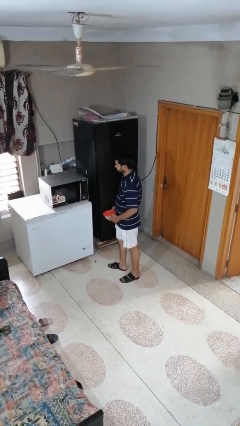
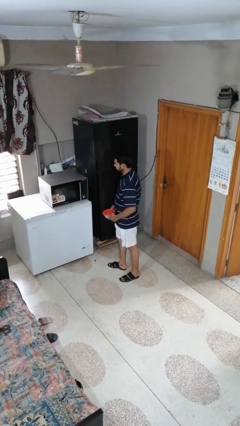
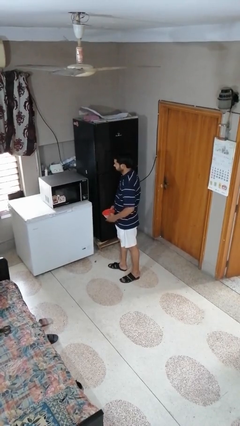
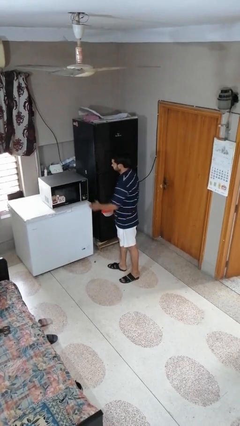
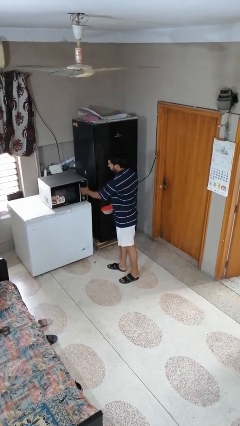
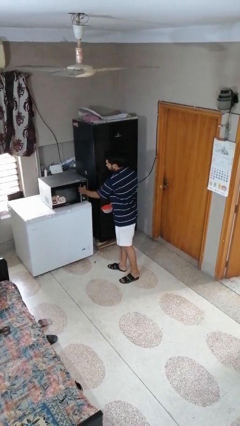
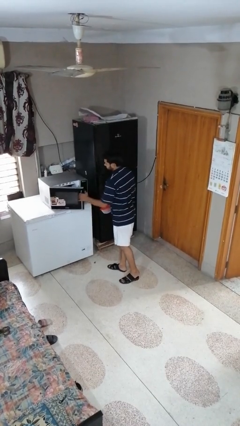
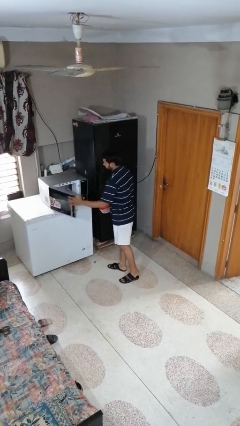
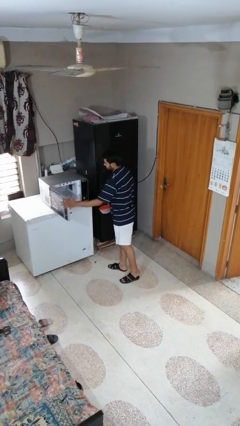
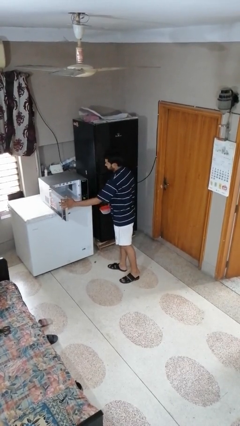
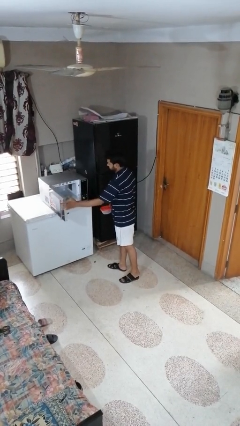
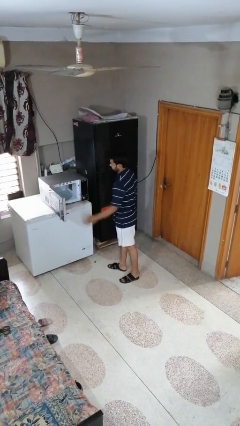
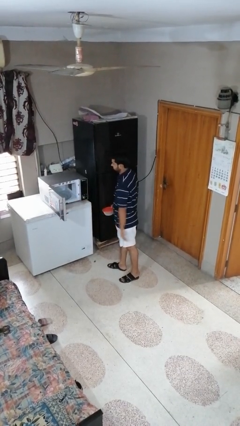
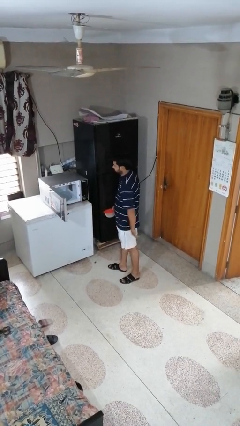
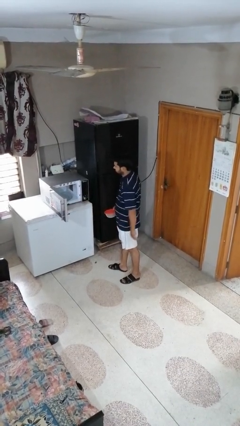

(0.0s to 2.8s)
person opens microwave

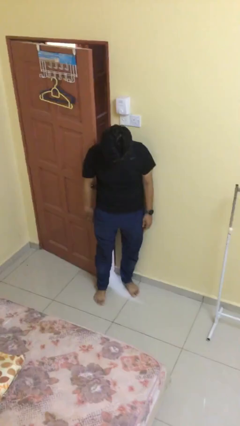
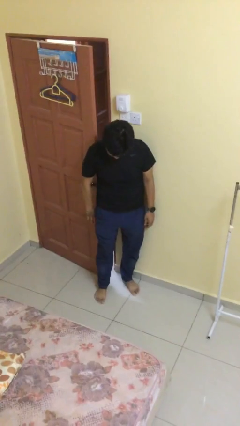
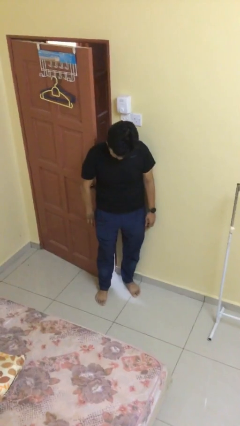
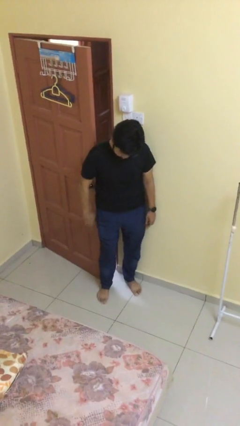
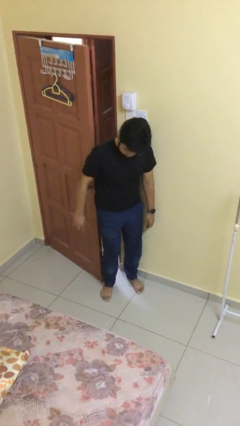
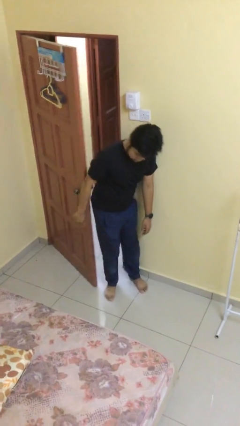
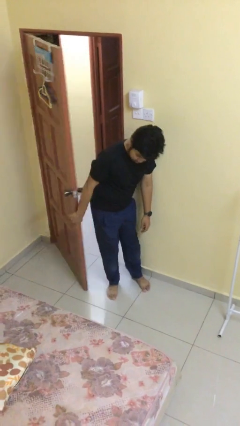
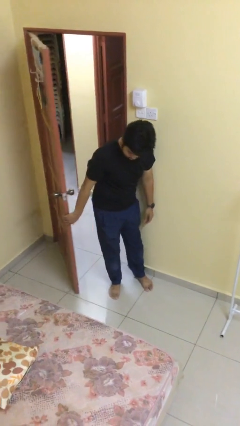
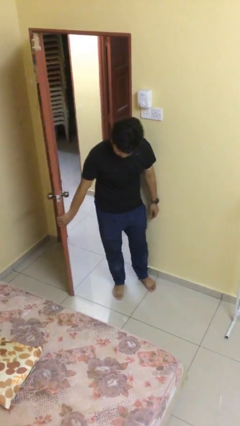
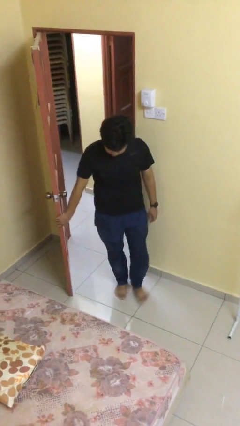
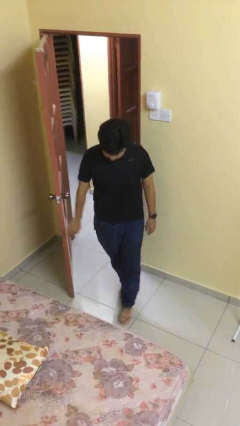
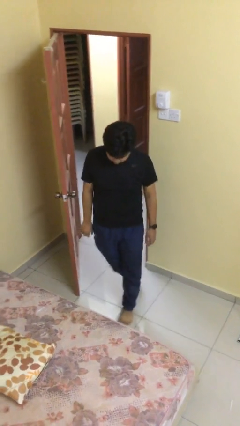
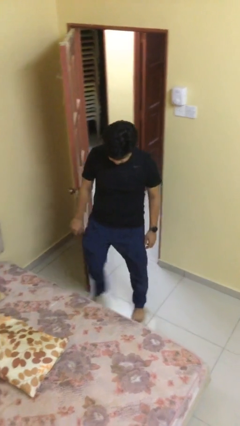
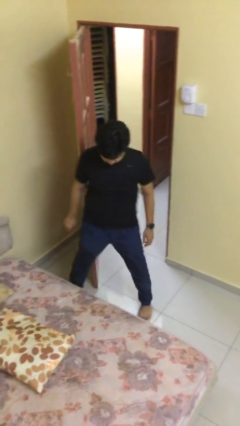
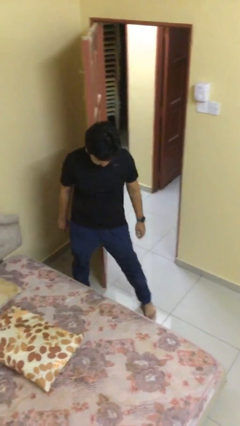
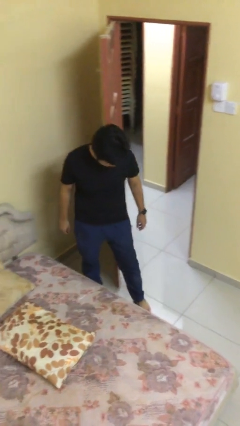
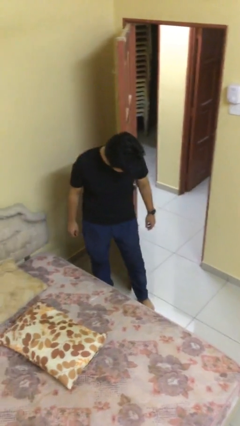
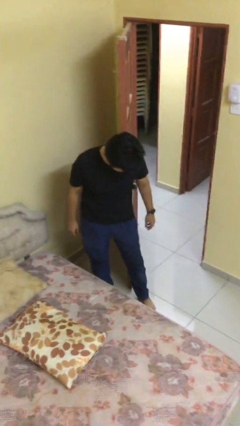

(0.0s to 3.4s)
person opens facility door

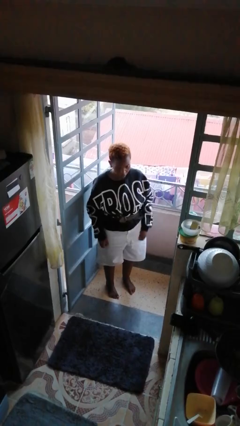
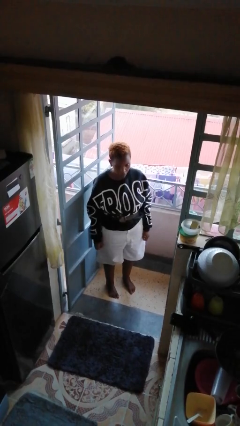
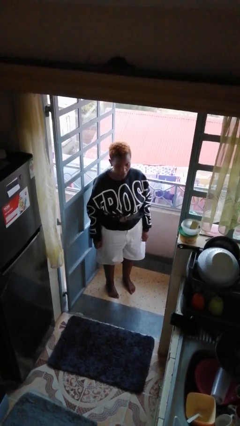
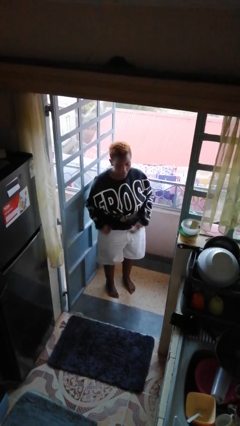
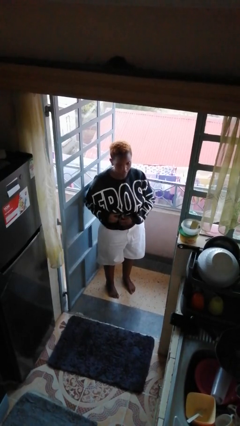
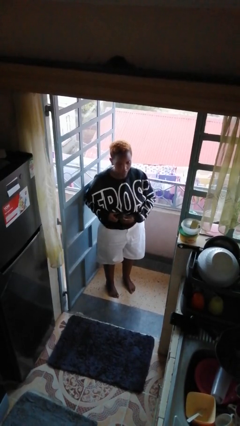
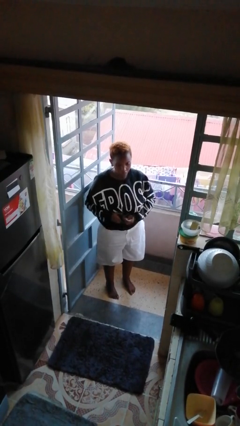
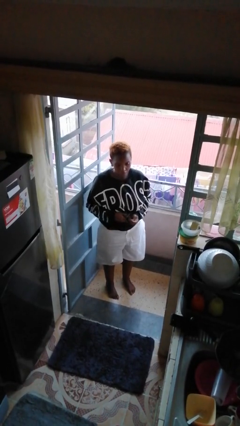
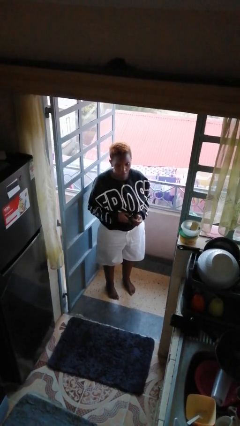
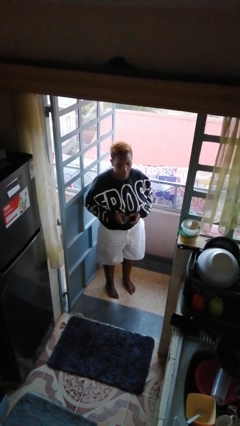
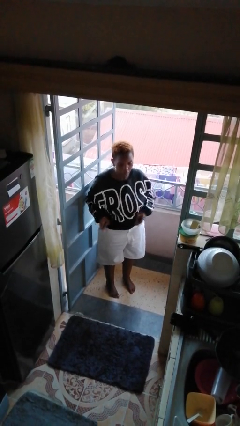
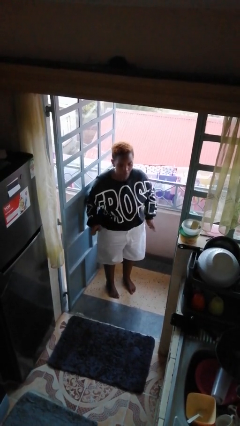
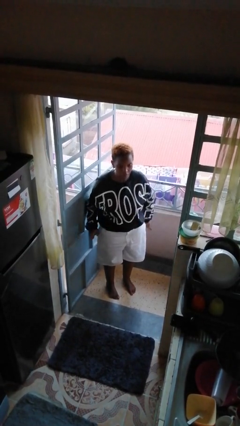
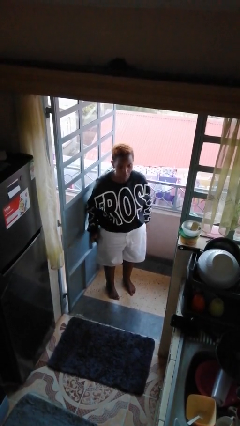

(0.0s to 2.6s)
person takes off belt

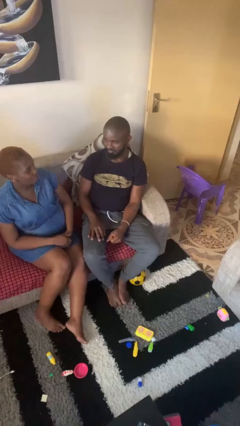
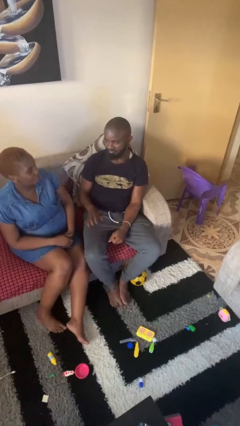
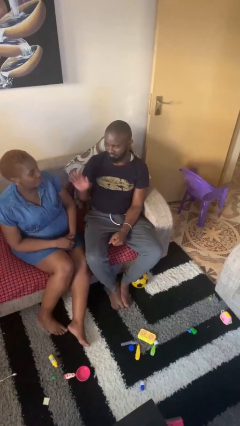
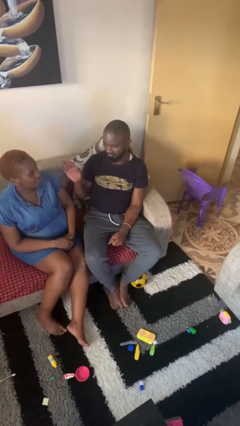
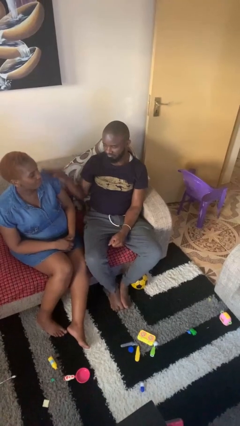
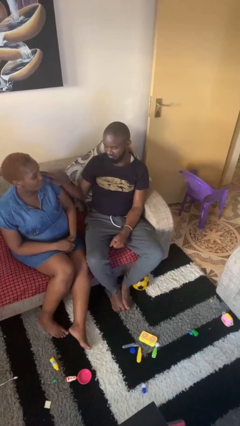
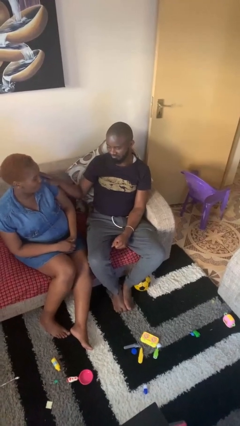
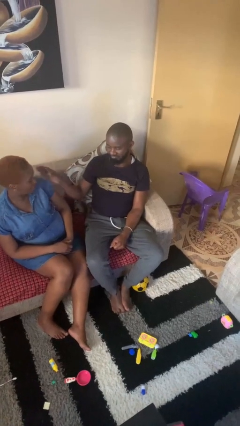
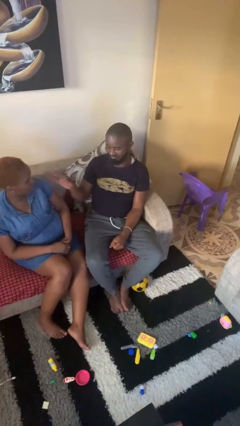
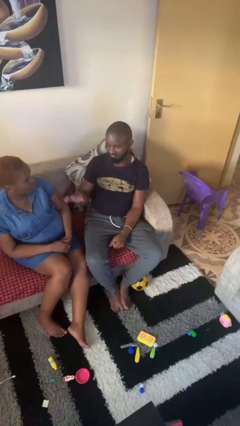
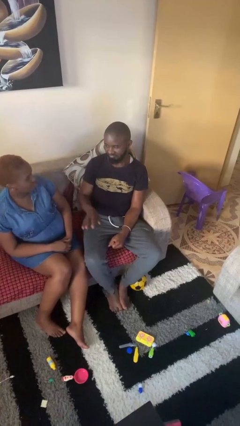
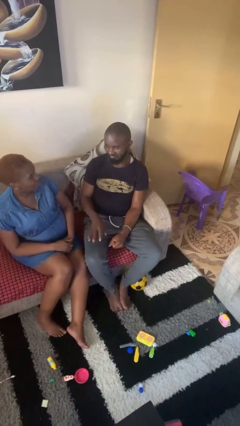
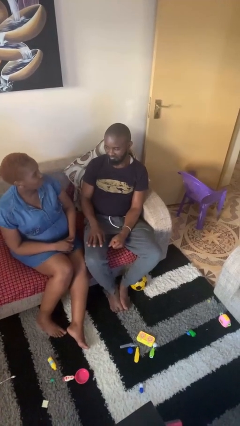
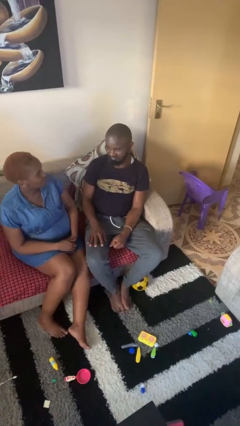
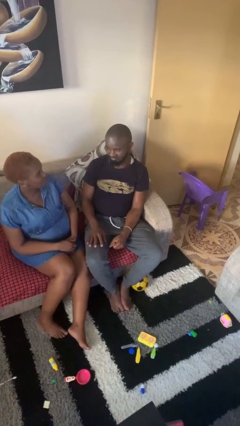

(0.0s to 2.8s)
person shoves person

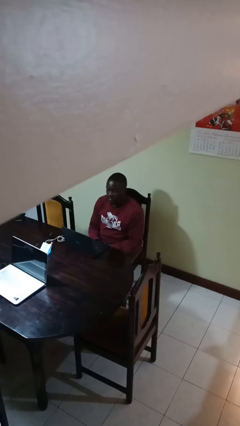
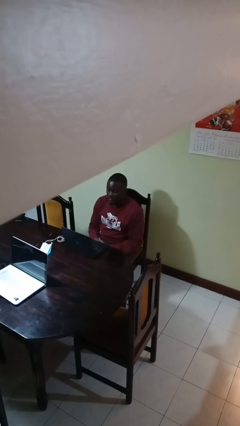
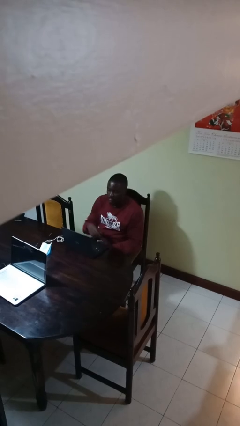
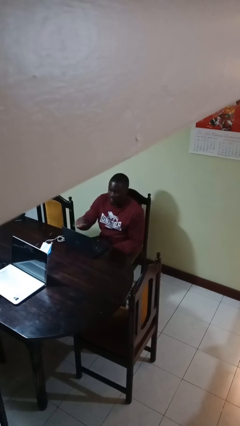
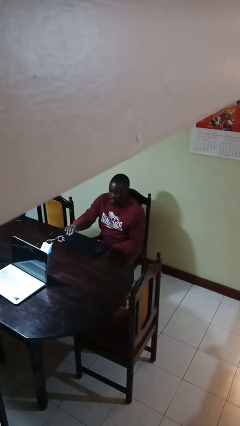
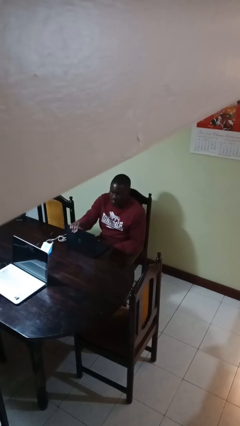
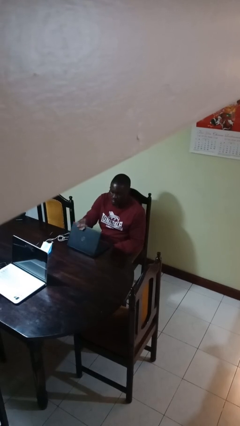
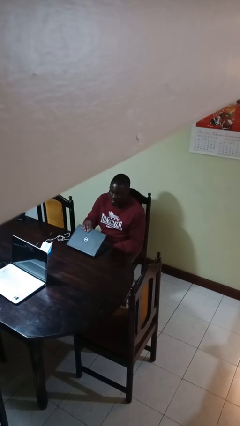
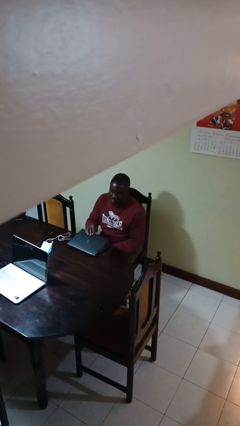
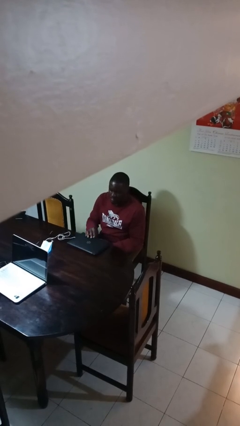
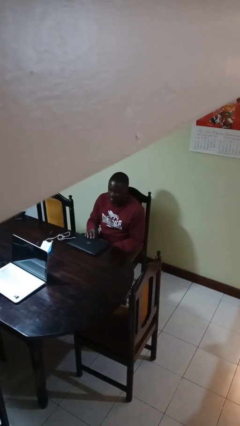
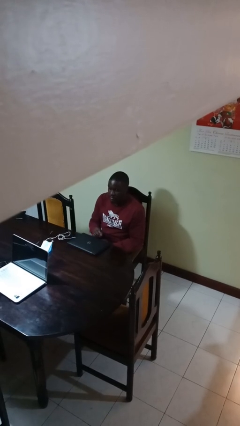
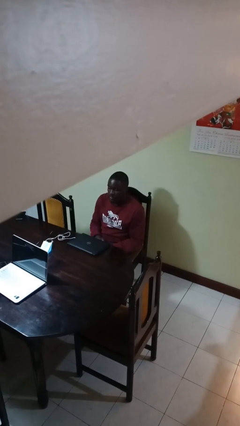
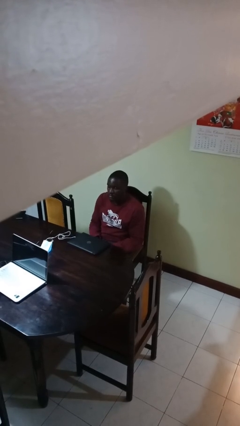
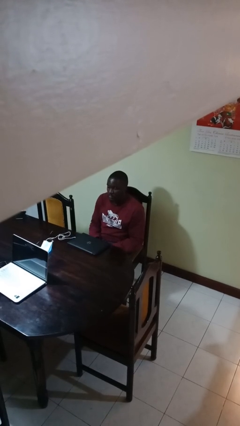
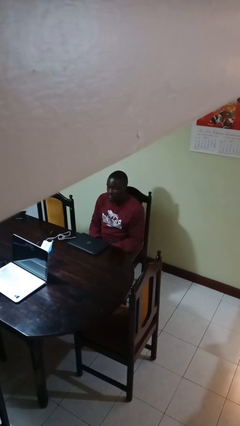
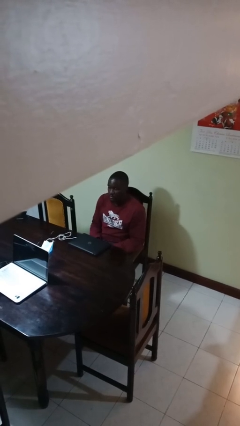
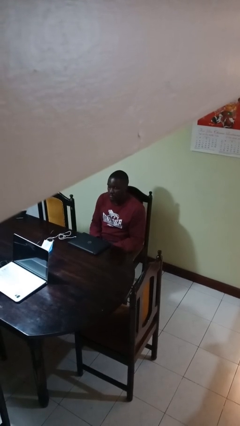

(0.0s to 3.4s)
person closes laptop

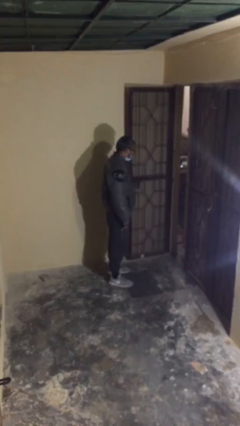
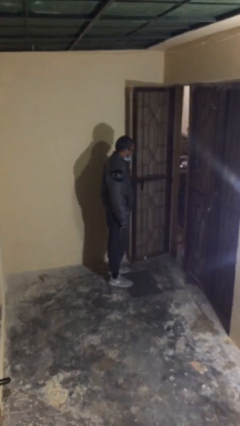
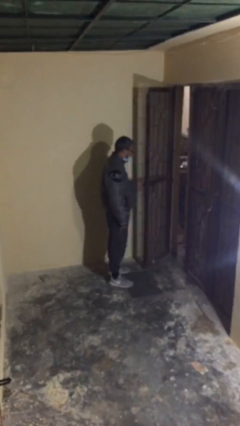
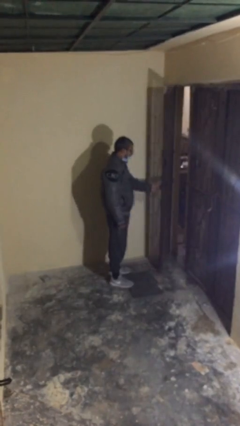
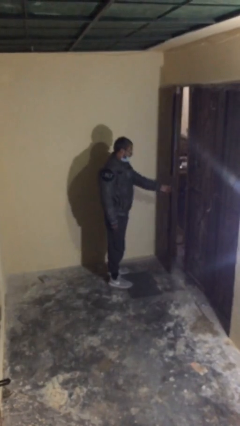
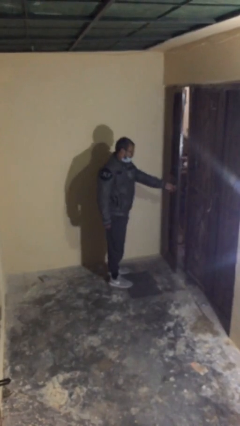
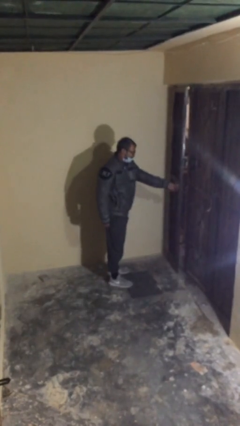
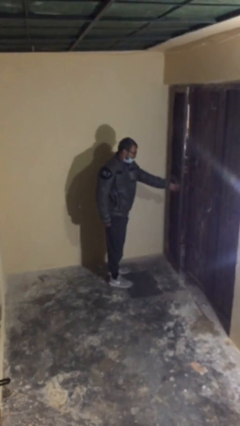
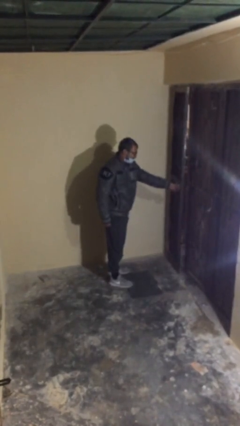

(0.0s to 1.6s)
person closes facility door

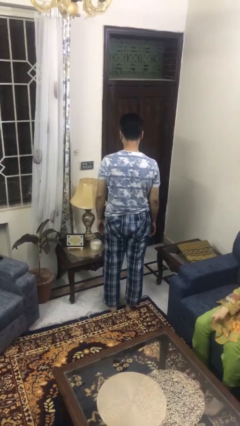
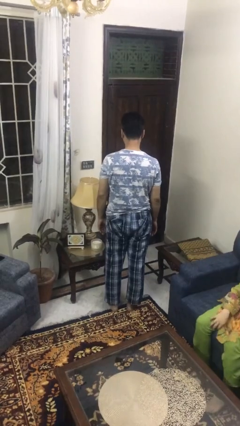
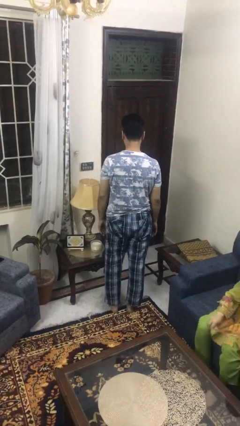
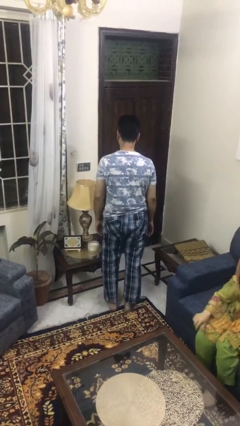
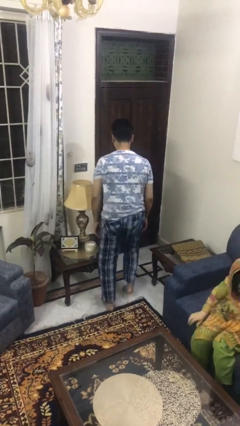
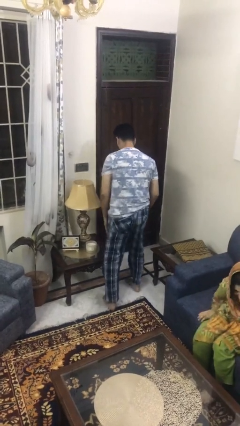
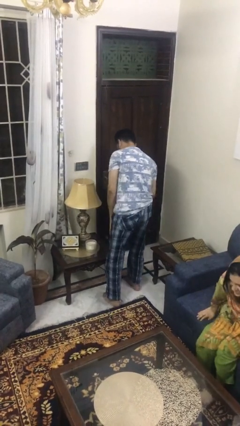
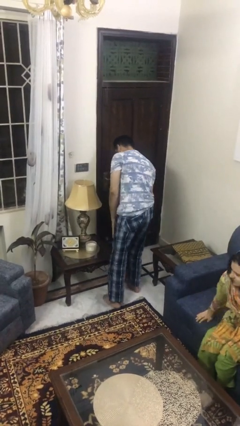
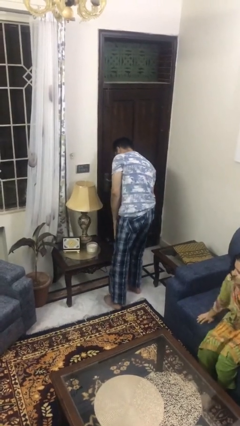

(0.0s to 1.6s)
person bumps into table
